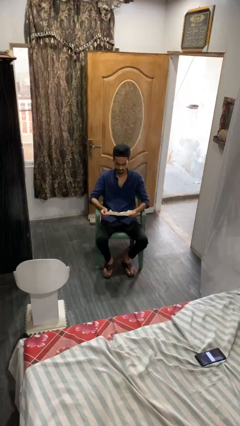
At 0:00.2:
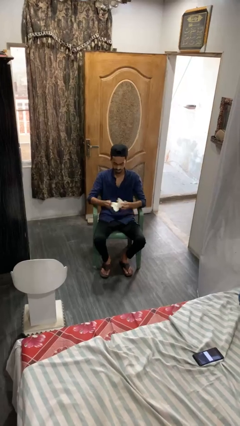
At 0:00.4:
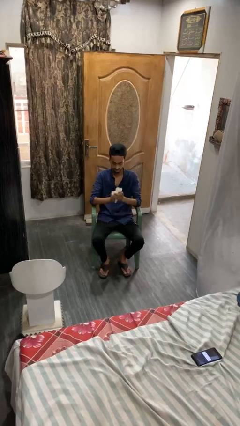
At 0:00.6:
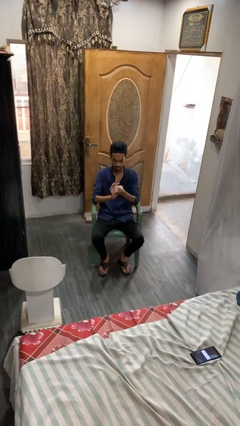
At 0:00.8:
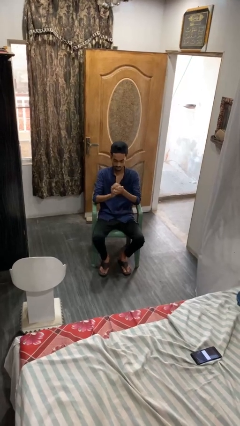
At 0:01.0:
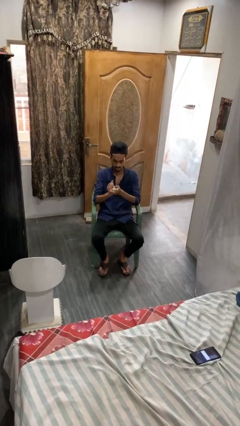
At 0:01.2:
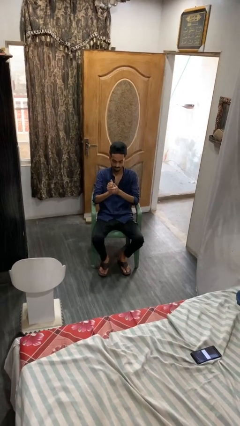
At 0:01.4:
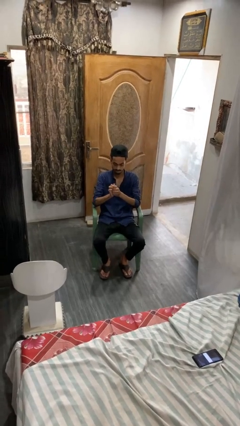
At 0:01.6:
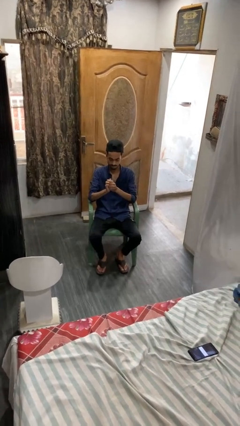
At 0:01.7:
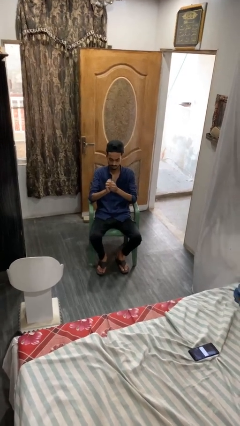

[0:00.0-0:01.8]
person crumples paper

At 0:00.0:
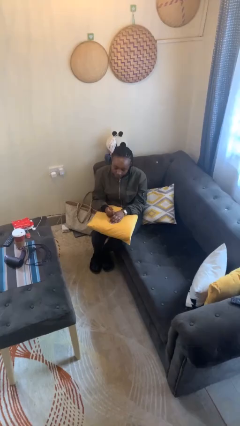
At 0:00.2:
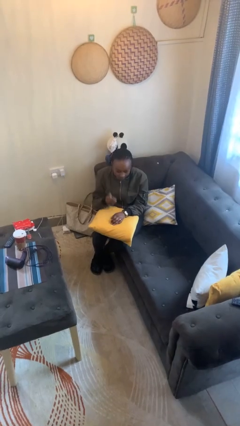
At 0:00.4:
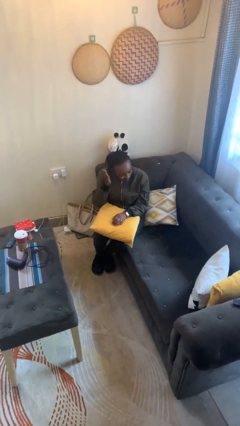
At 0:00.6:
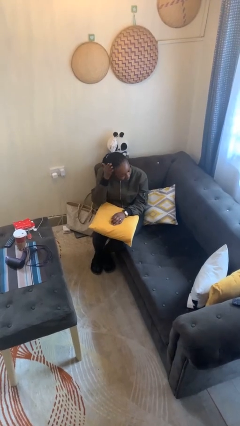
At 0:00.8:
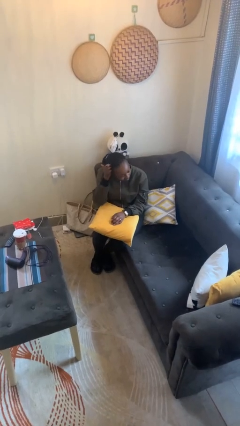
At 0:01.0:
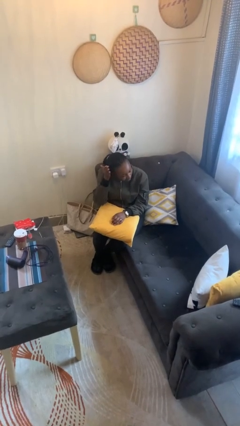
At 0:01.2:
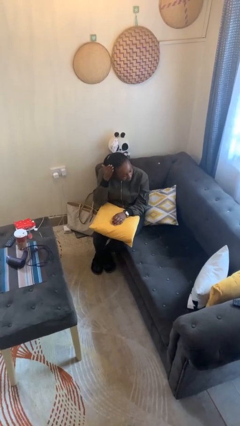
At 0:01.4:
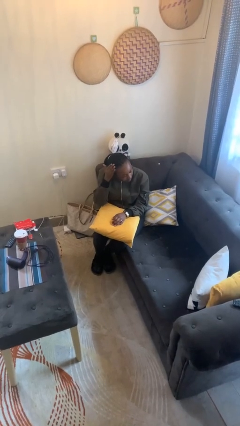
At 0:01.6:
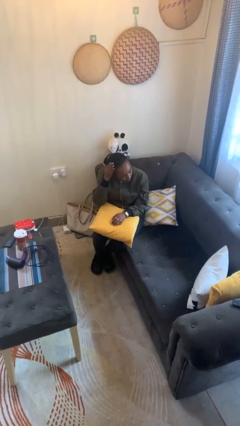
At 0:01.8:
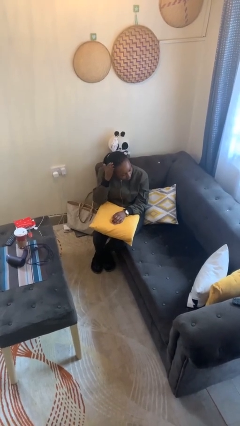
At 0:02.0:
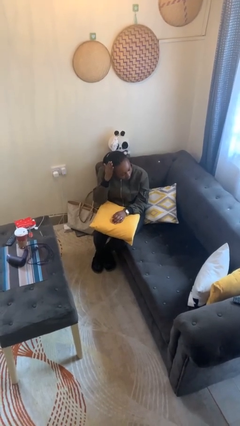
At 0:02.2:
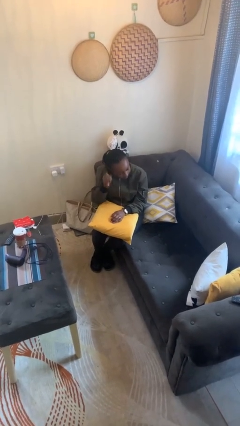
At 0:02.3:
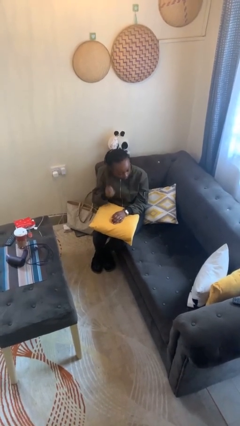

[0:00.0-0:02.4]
person pats head

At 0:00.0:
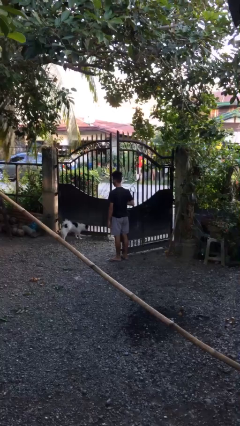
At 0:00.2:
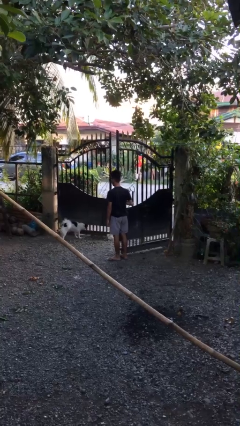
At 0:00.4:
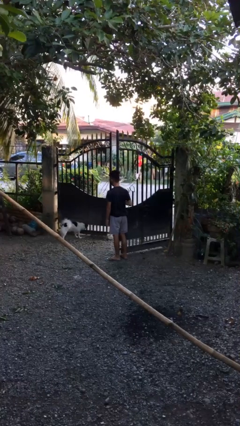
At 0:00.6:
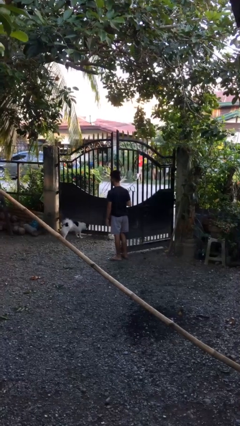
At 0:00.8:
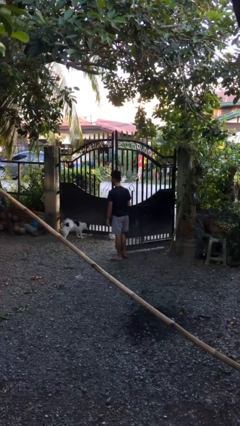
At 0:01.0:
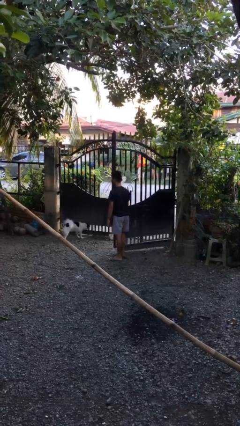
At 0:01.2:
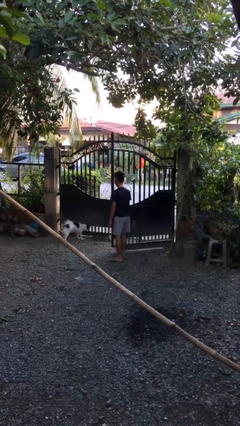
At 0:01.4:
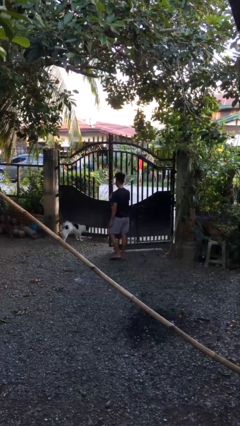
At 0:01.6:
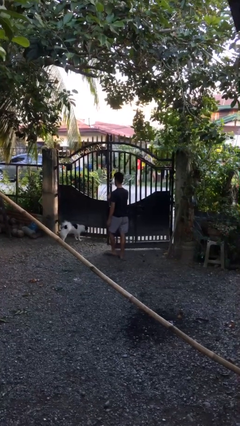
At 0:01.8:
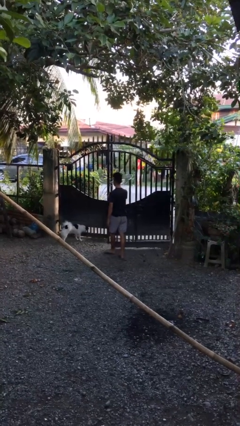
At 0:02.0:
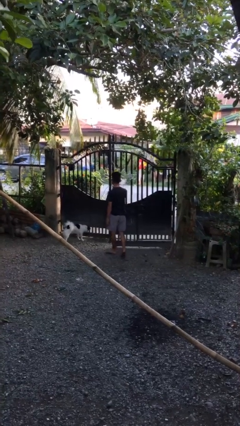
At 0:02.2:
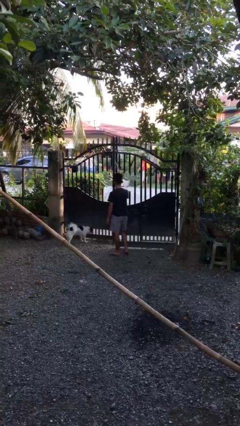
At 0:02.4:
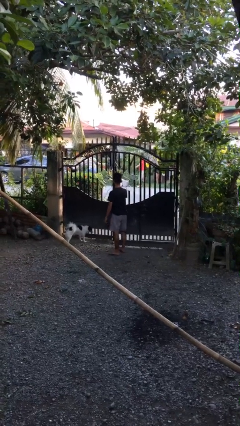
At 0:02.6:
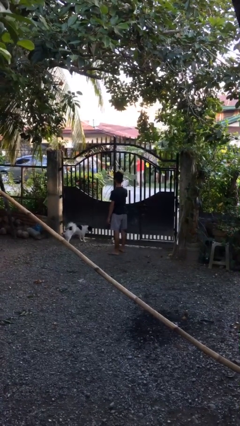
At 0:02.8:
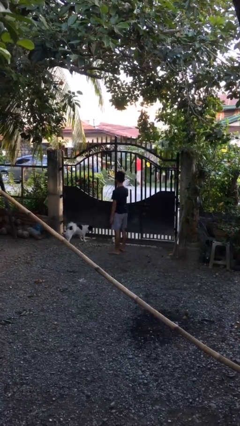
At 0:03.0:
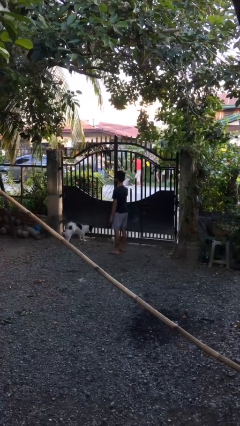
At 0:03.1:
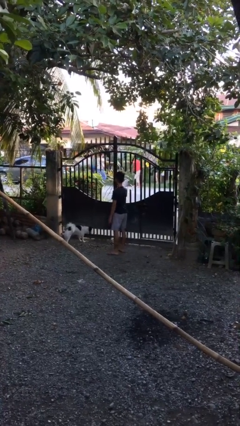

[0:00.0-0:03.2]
person closes gate

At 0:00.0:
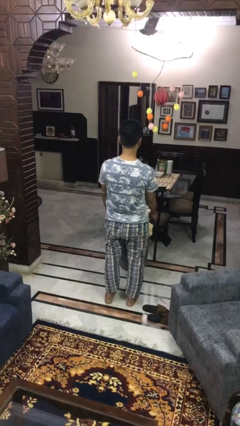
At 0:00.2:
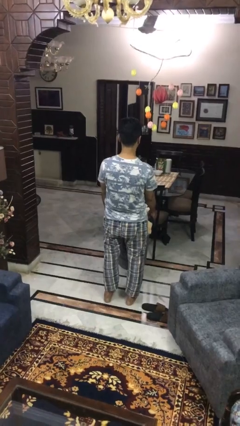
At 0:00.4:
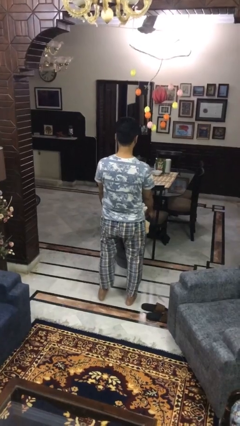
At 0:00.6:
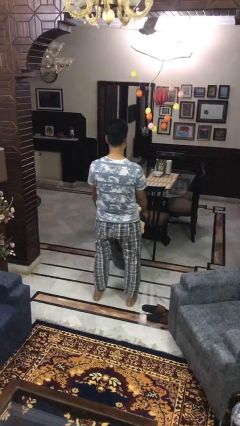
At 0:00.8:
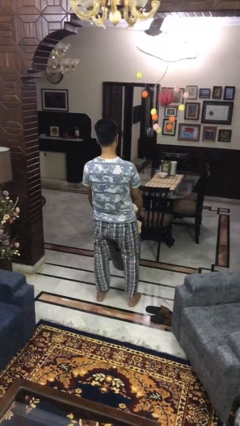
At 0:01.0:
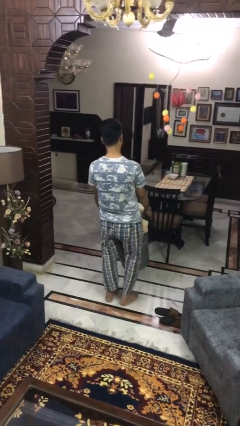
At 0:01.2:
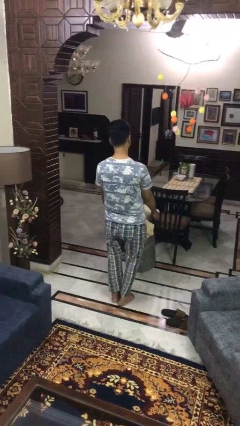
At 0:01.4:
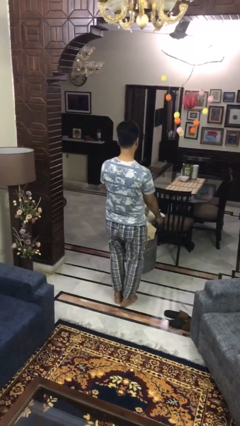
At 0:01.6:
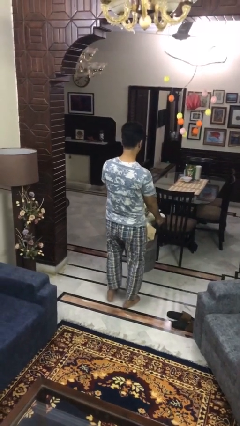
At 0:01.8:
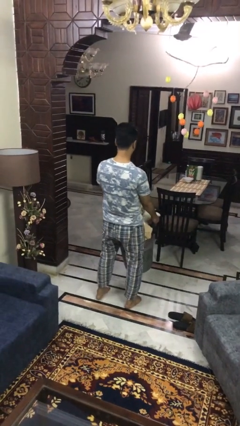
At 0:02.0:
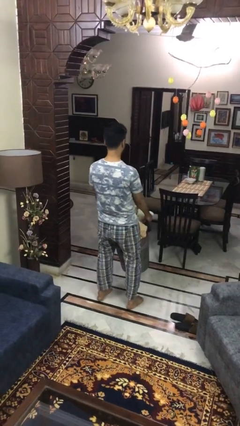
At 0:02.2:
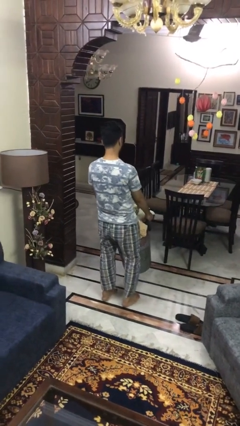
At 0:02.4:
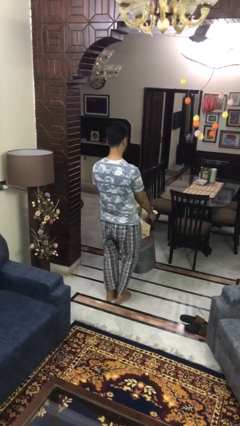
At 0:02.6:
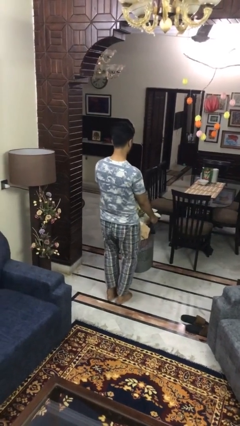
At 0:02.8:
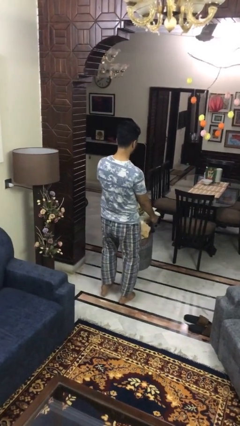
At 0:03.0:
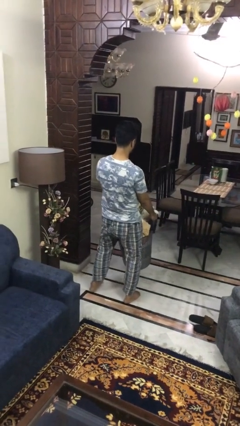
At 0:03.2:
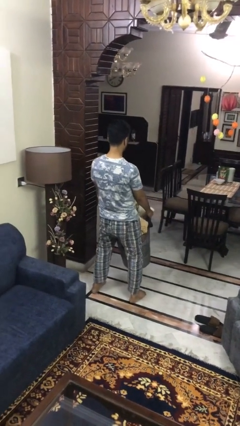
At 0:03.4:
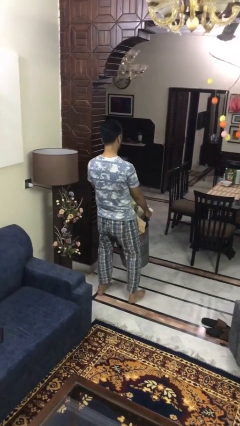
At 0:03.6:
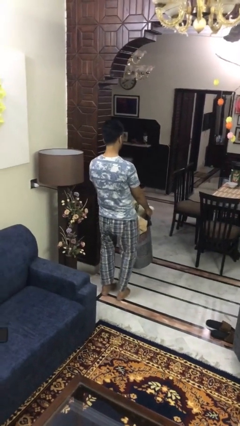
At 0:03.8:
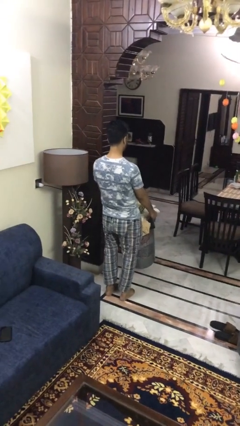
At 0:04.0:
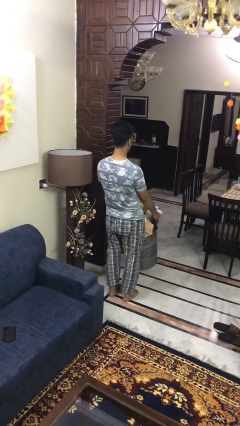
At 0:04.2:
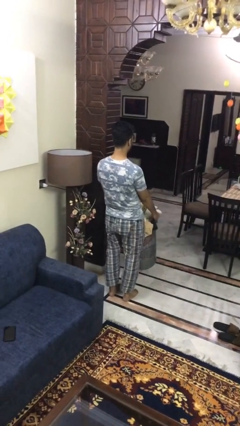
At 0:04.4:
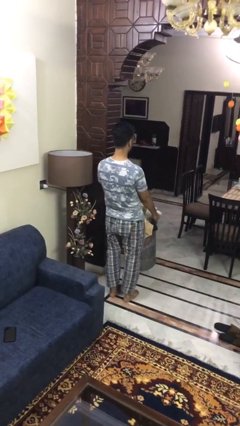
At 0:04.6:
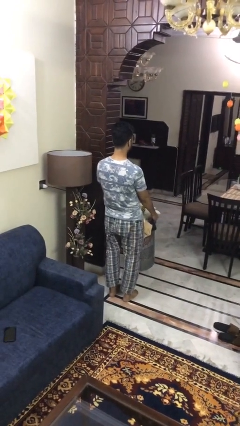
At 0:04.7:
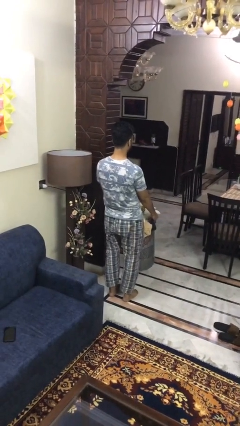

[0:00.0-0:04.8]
person carries laundry basket

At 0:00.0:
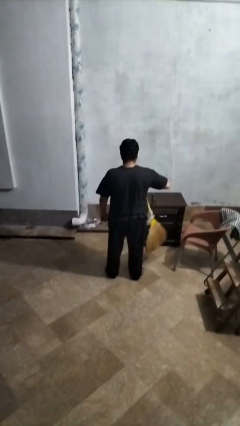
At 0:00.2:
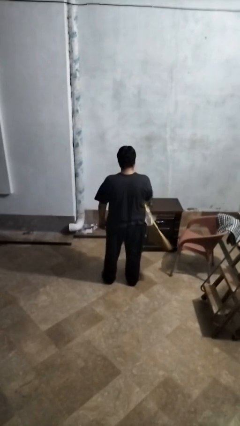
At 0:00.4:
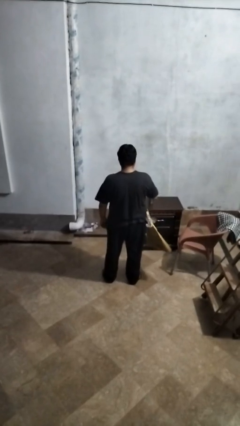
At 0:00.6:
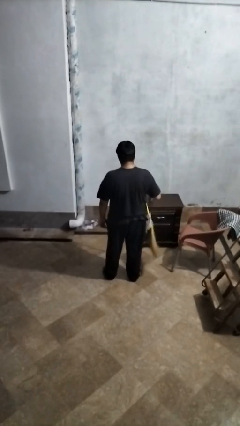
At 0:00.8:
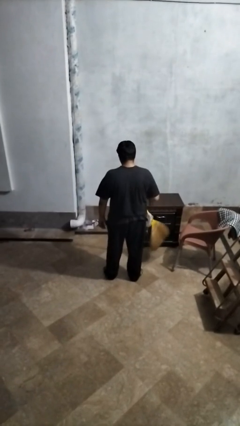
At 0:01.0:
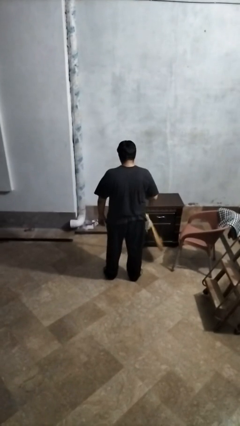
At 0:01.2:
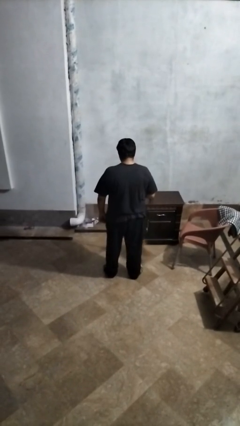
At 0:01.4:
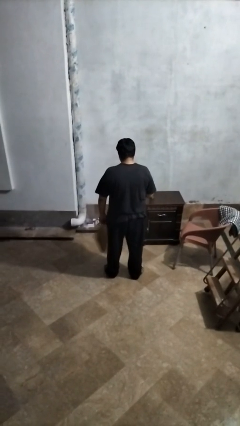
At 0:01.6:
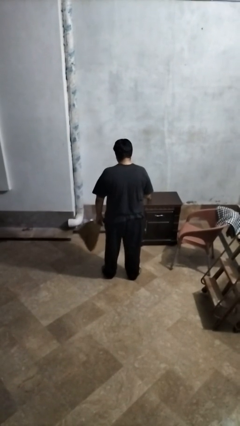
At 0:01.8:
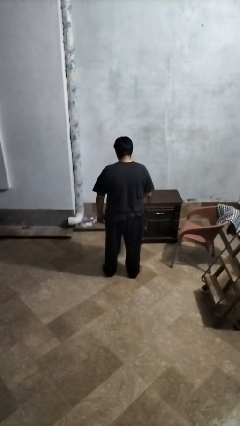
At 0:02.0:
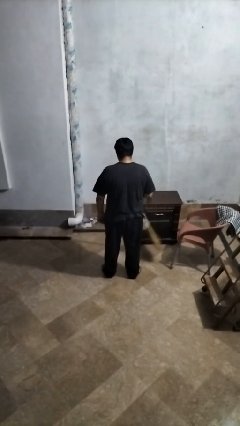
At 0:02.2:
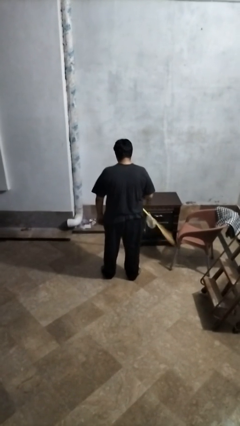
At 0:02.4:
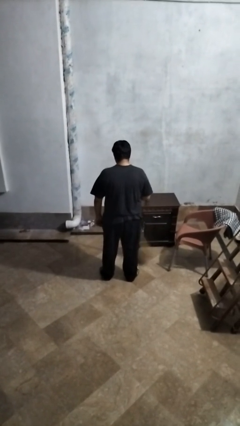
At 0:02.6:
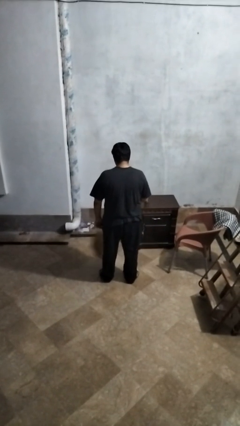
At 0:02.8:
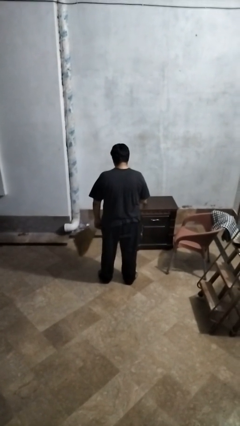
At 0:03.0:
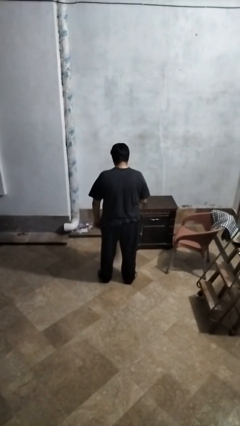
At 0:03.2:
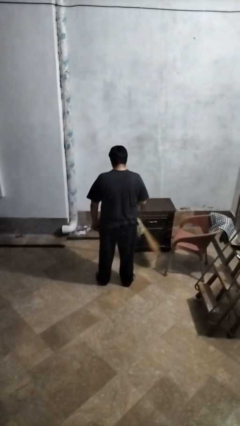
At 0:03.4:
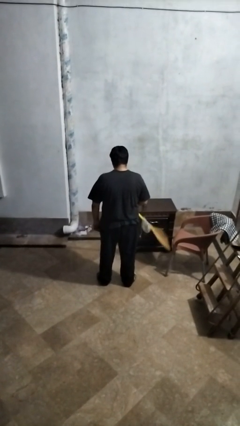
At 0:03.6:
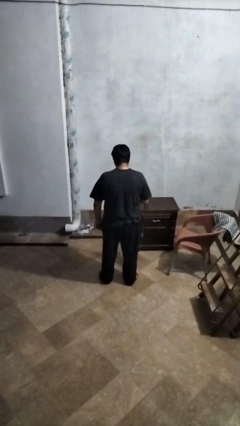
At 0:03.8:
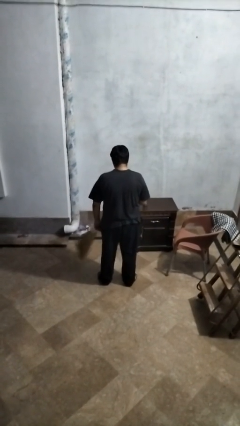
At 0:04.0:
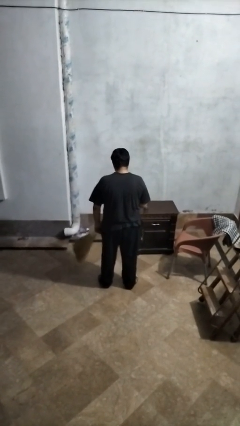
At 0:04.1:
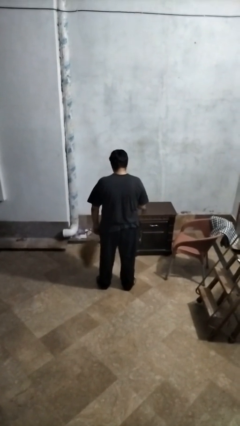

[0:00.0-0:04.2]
person mops

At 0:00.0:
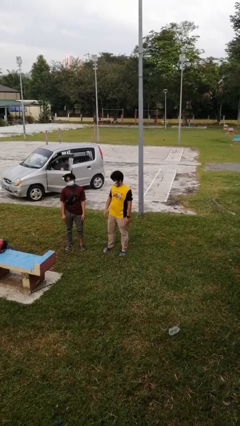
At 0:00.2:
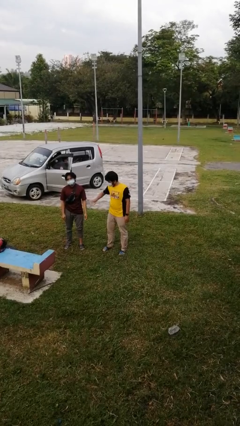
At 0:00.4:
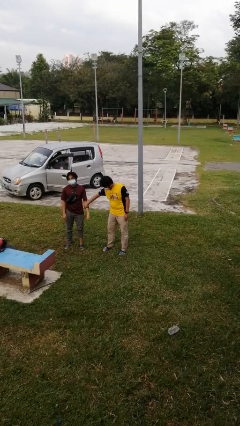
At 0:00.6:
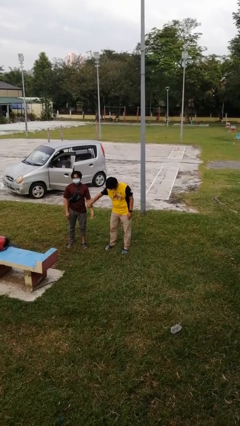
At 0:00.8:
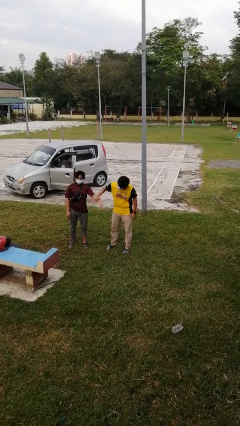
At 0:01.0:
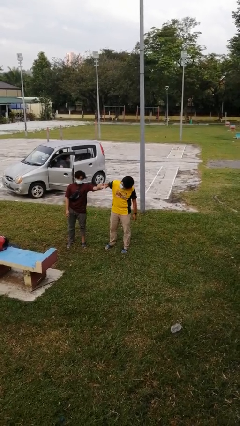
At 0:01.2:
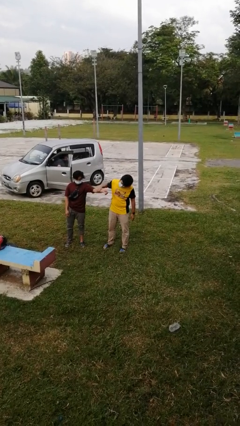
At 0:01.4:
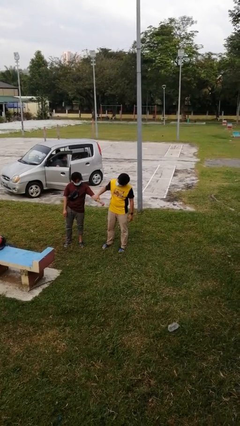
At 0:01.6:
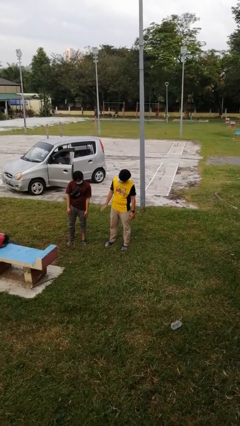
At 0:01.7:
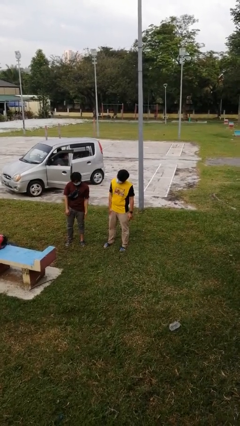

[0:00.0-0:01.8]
person grabs person by forearm
